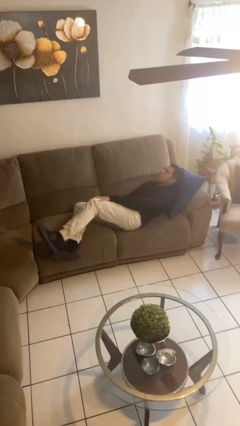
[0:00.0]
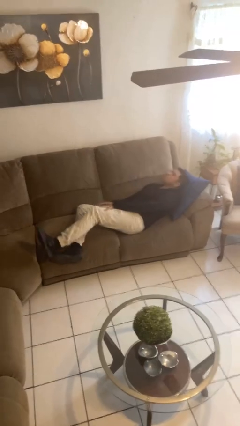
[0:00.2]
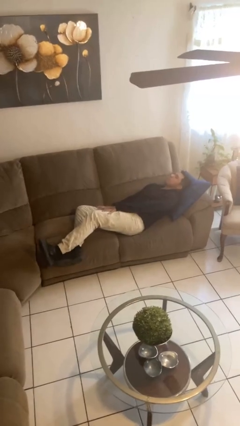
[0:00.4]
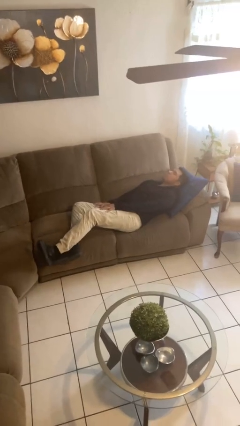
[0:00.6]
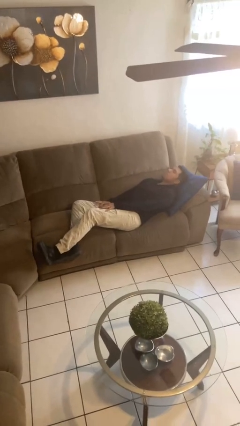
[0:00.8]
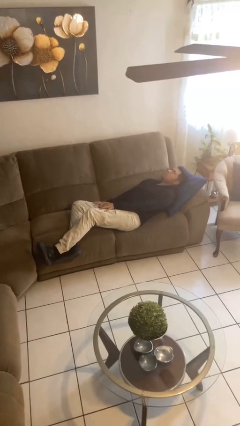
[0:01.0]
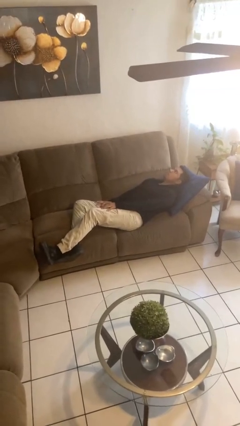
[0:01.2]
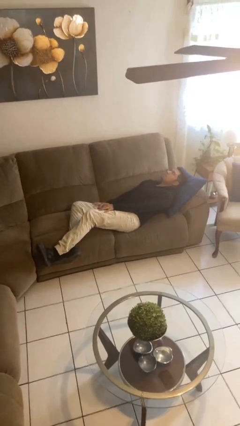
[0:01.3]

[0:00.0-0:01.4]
person lies down on couch

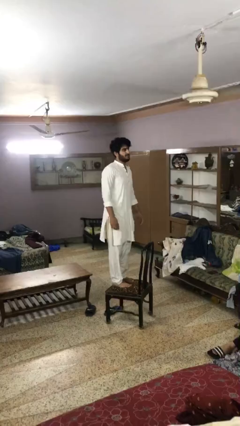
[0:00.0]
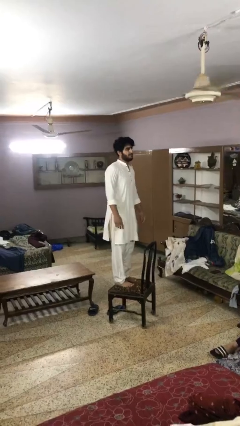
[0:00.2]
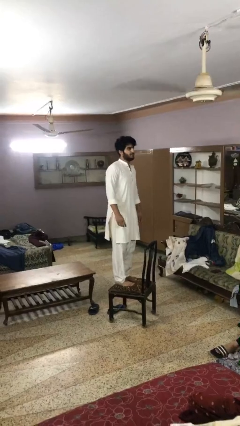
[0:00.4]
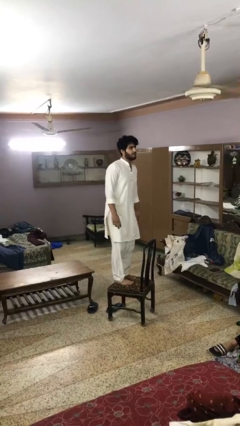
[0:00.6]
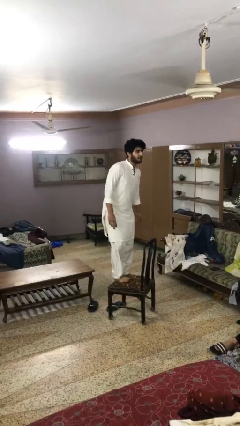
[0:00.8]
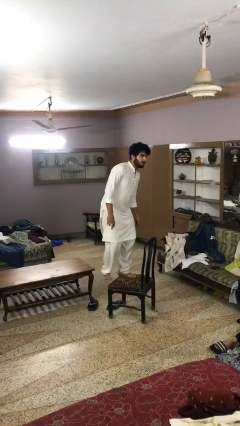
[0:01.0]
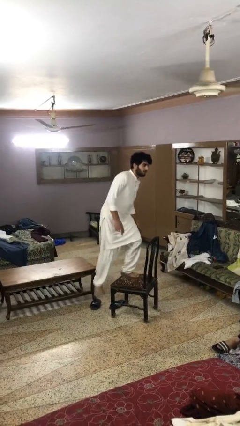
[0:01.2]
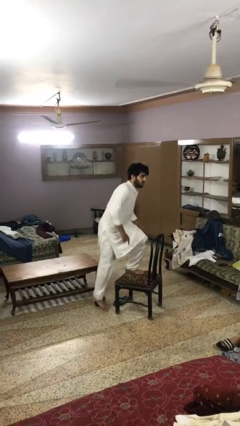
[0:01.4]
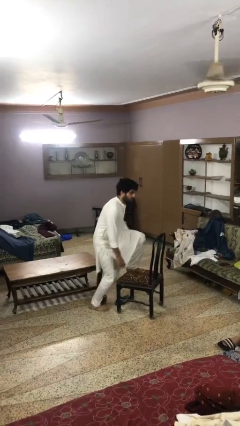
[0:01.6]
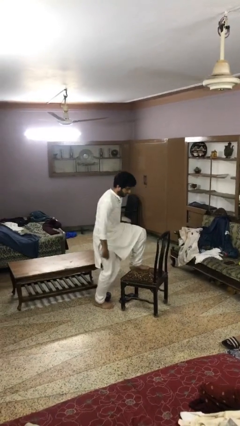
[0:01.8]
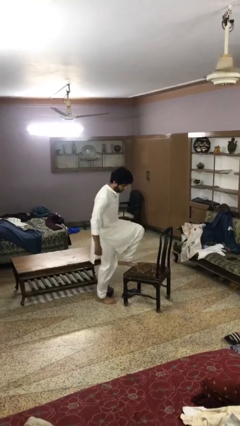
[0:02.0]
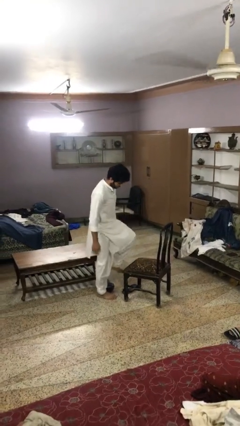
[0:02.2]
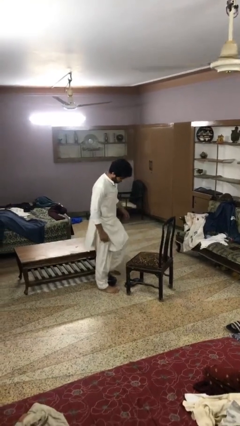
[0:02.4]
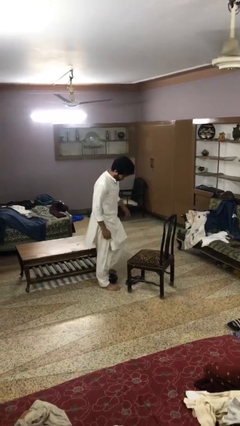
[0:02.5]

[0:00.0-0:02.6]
person climbs off chair

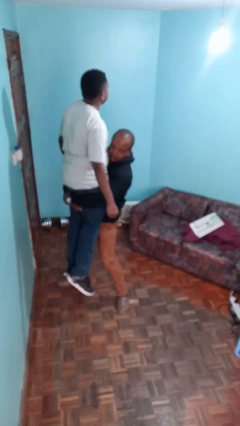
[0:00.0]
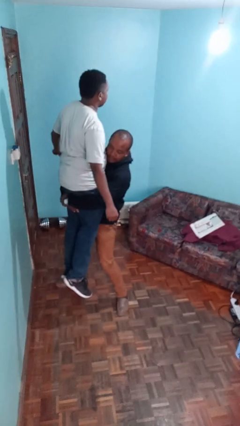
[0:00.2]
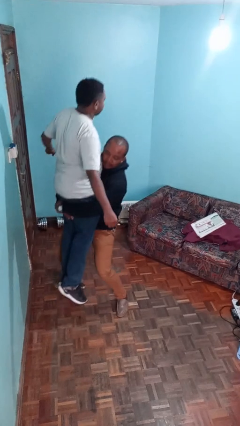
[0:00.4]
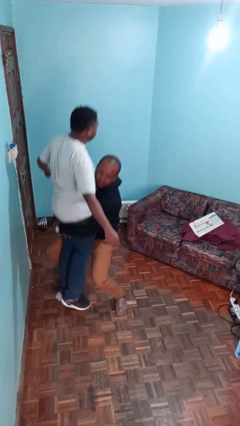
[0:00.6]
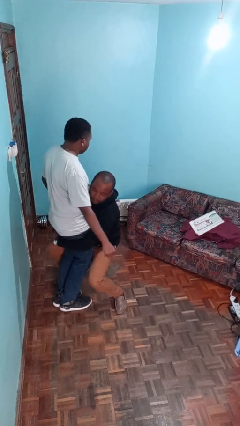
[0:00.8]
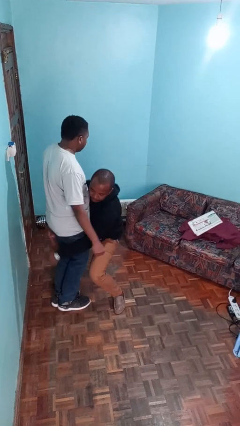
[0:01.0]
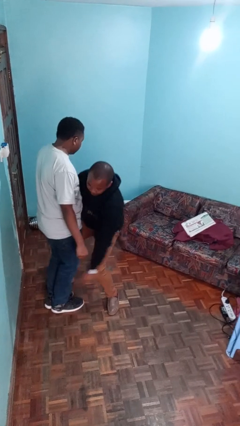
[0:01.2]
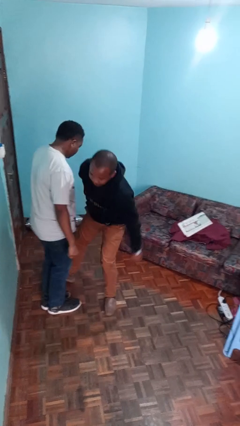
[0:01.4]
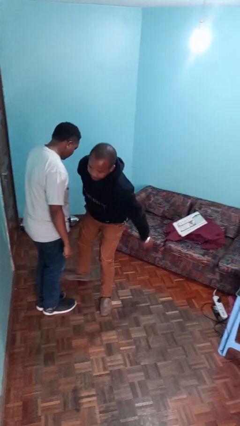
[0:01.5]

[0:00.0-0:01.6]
person puts down person

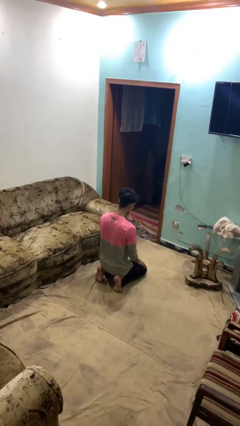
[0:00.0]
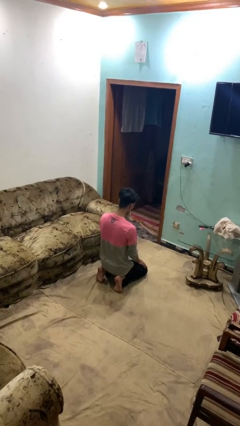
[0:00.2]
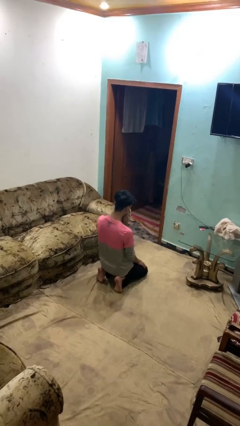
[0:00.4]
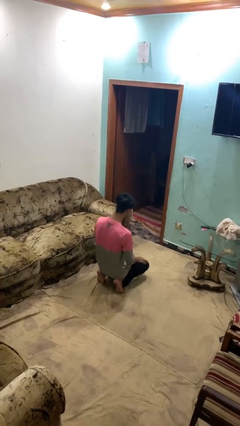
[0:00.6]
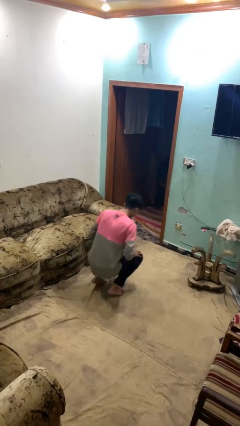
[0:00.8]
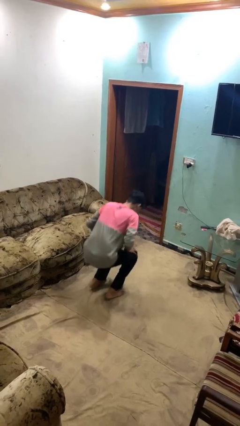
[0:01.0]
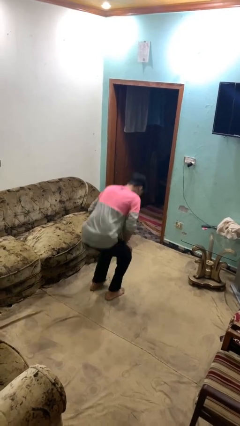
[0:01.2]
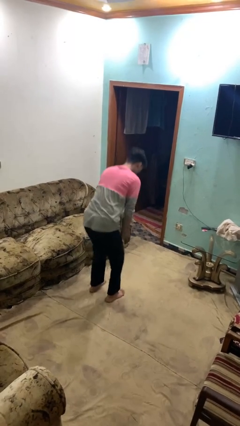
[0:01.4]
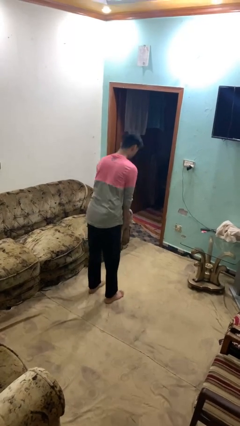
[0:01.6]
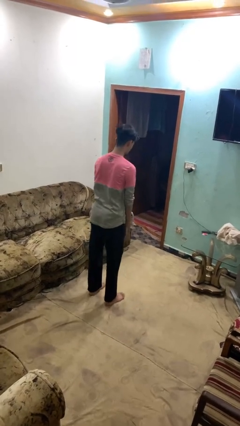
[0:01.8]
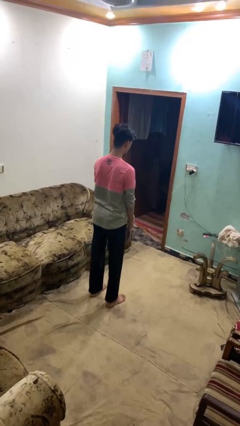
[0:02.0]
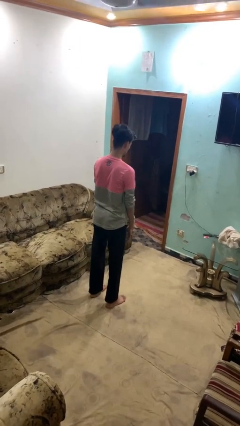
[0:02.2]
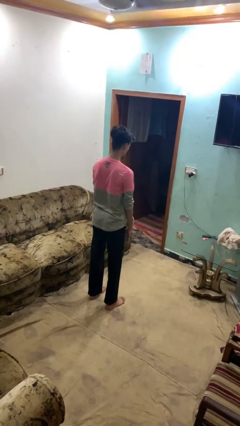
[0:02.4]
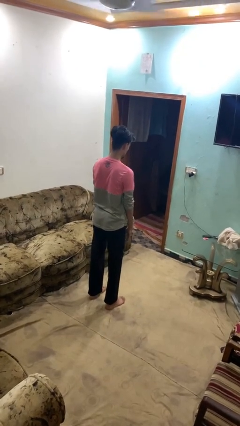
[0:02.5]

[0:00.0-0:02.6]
person stands up from floor

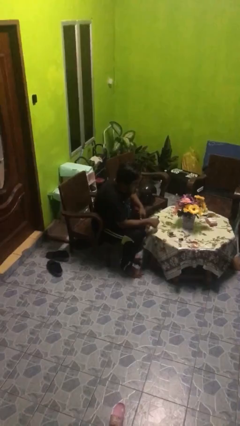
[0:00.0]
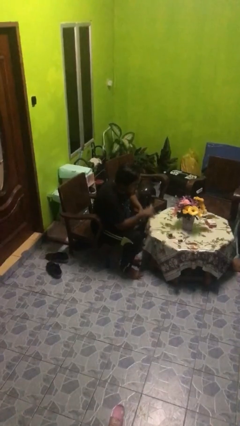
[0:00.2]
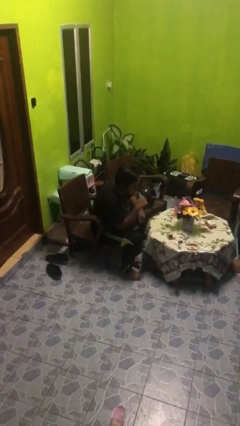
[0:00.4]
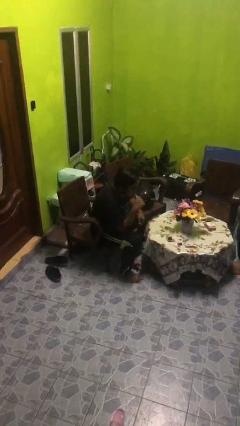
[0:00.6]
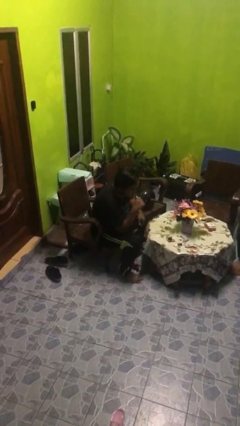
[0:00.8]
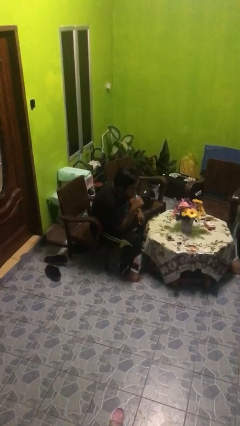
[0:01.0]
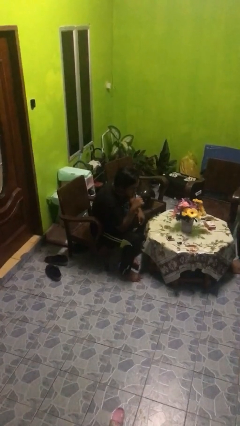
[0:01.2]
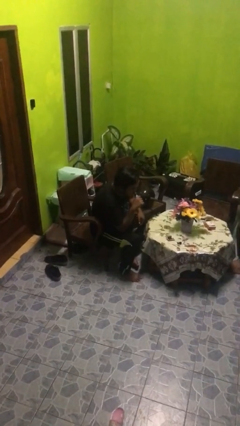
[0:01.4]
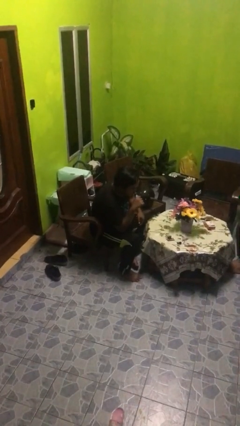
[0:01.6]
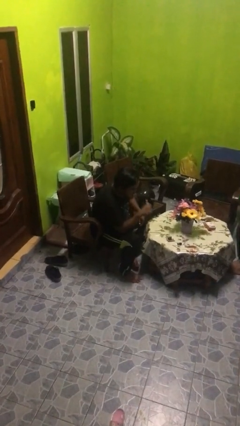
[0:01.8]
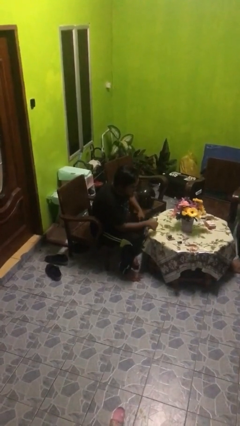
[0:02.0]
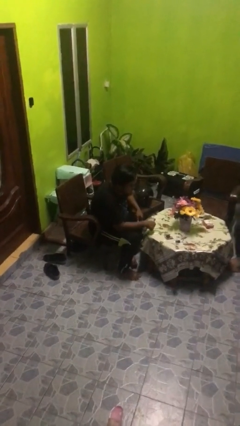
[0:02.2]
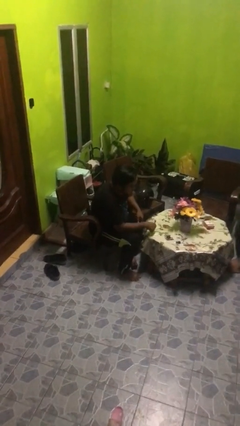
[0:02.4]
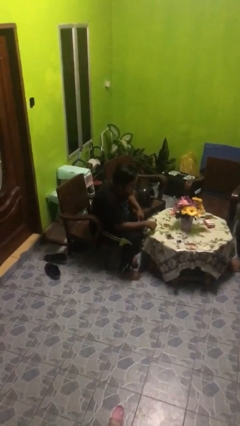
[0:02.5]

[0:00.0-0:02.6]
person vapes

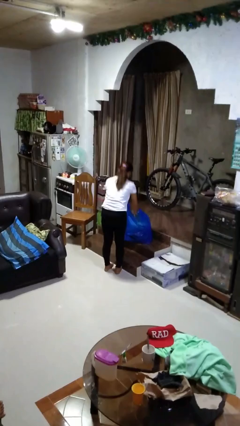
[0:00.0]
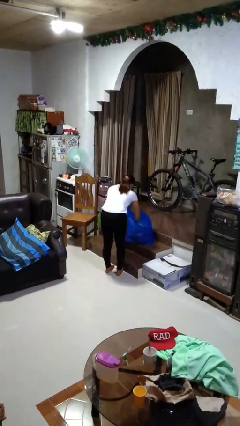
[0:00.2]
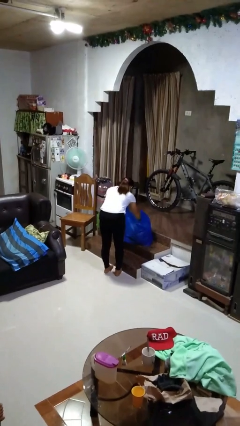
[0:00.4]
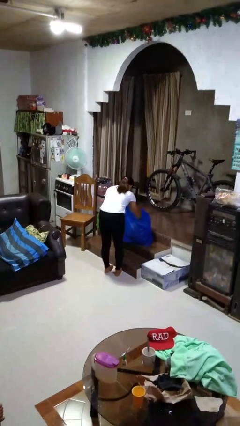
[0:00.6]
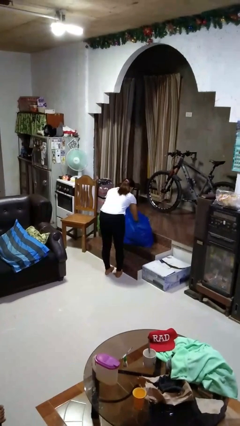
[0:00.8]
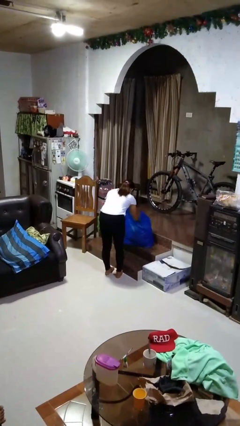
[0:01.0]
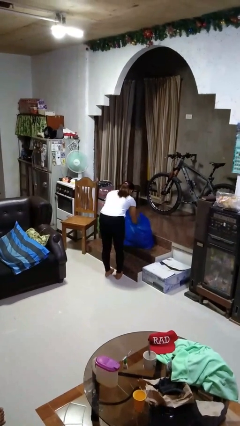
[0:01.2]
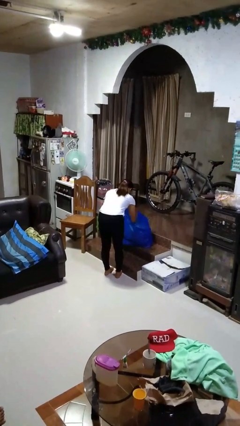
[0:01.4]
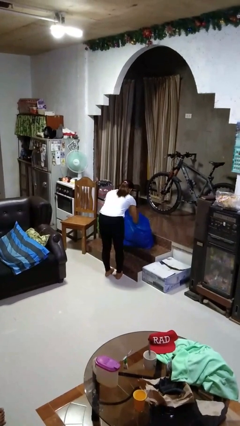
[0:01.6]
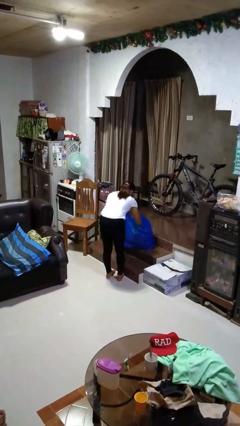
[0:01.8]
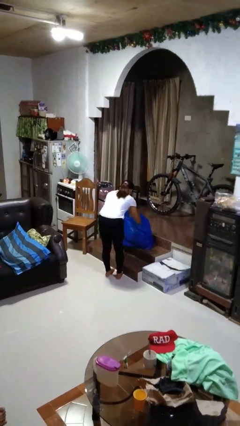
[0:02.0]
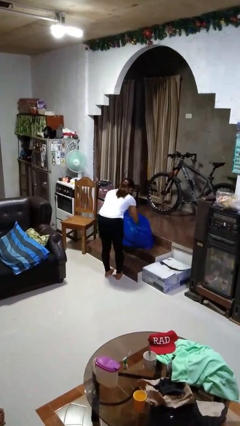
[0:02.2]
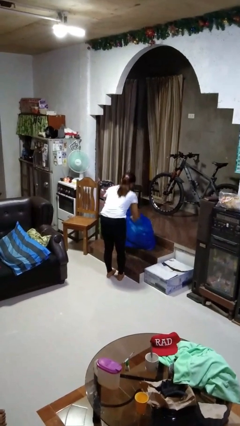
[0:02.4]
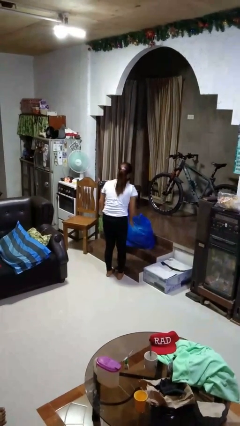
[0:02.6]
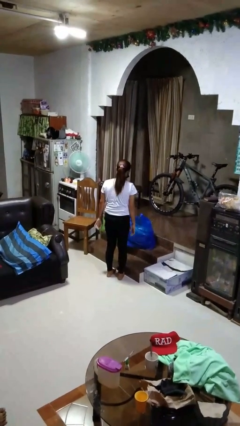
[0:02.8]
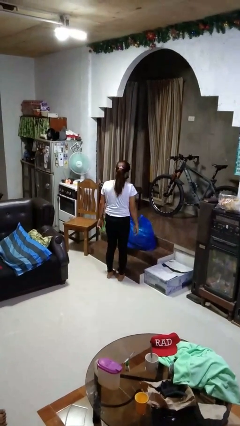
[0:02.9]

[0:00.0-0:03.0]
person searches in bag

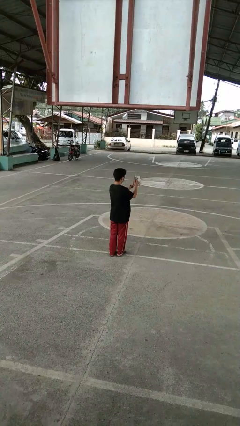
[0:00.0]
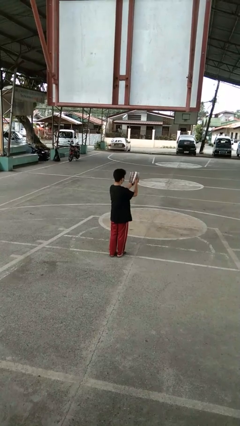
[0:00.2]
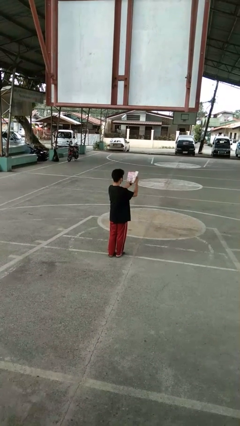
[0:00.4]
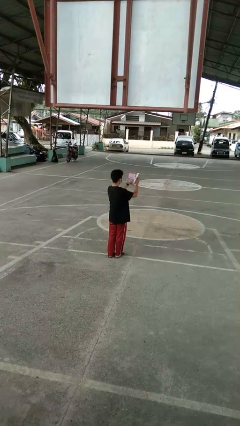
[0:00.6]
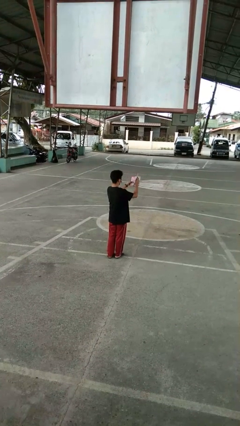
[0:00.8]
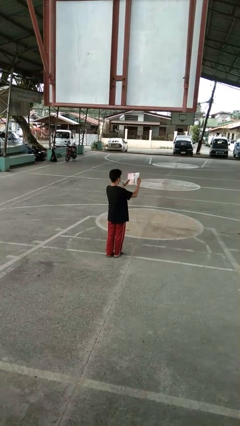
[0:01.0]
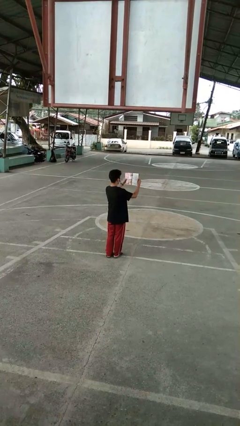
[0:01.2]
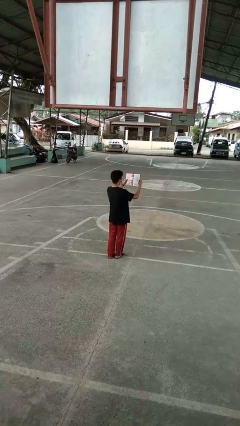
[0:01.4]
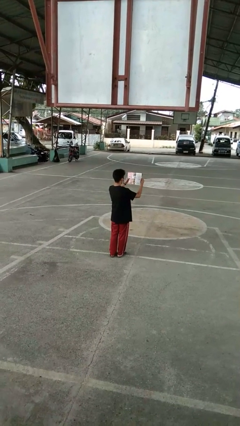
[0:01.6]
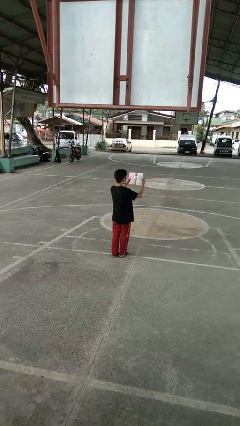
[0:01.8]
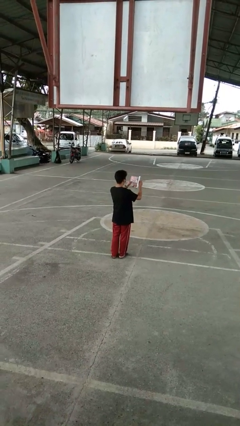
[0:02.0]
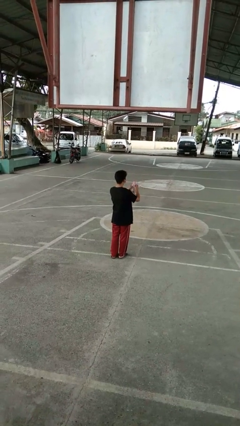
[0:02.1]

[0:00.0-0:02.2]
person reads magazine

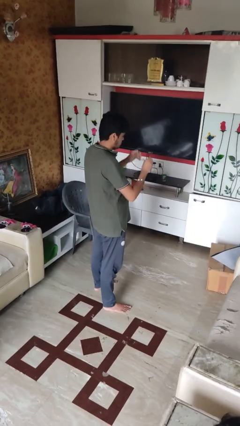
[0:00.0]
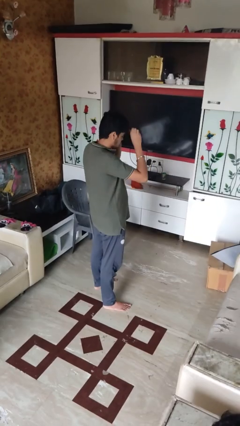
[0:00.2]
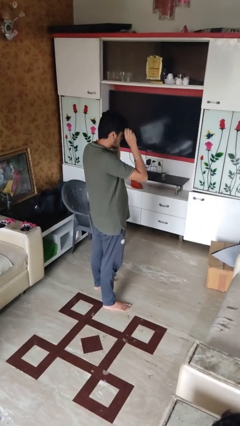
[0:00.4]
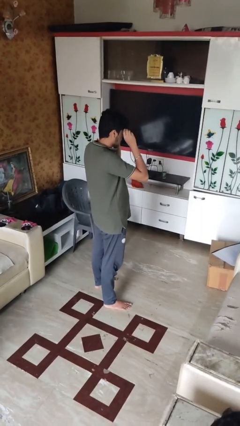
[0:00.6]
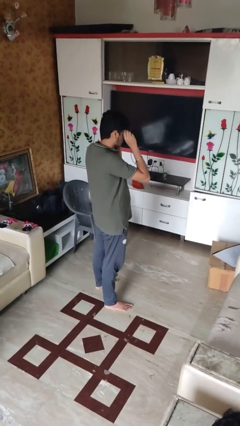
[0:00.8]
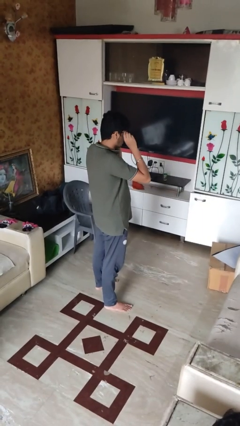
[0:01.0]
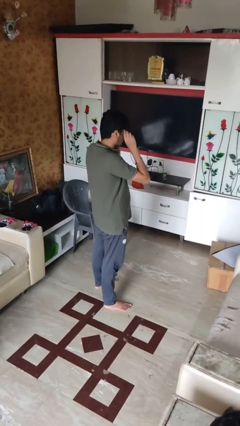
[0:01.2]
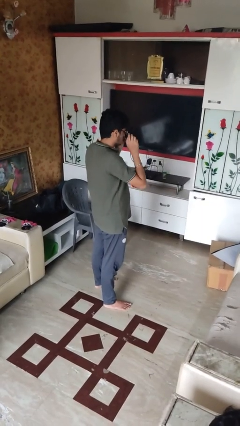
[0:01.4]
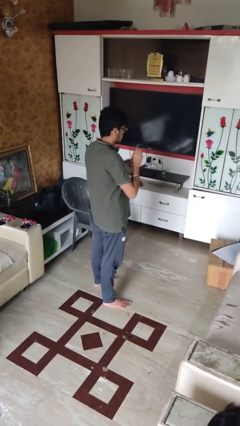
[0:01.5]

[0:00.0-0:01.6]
person puts on glasses
